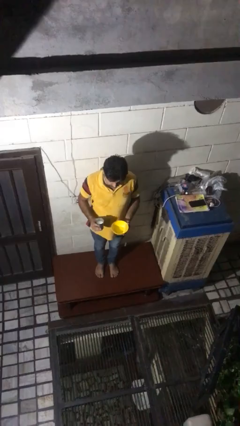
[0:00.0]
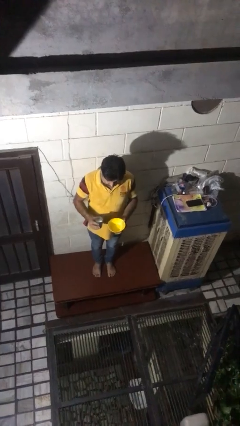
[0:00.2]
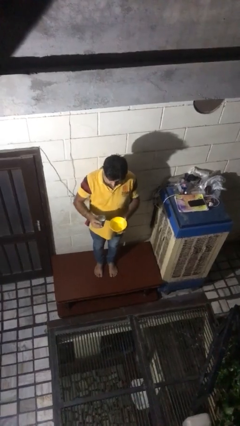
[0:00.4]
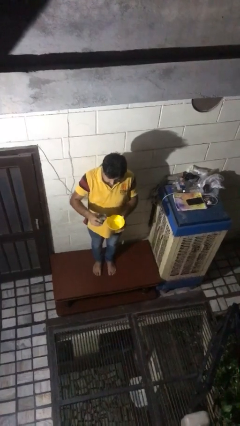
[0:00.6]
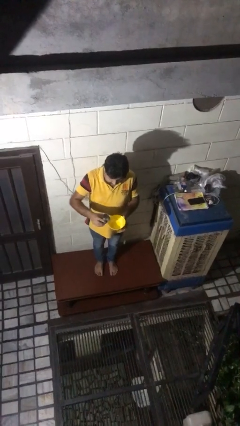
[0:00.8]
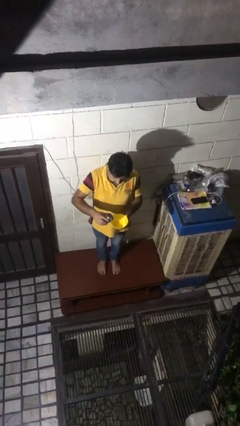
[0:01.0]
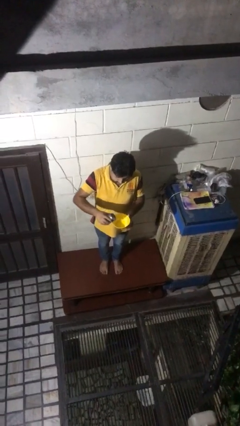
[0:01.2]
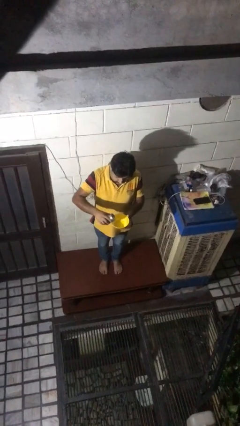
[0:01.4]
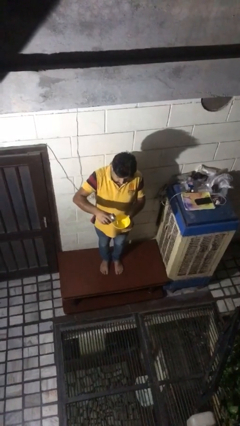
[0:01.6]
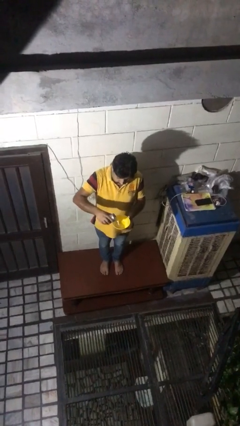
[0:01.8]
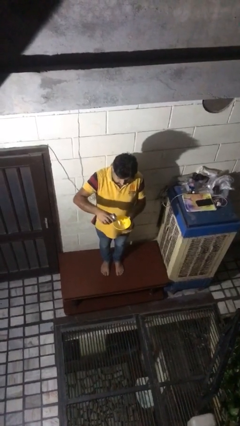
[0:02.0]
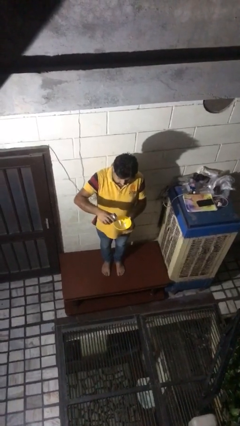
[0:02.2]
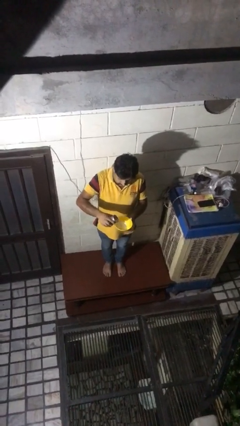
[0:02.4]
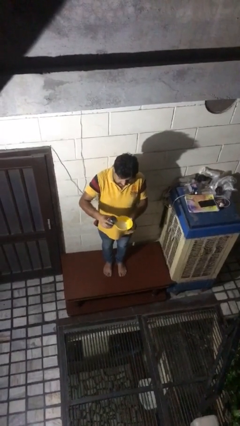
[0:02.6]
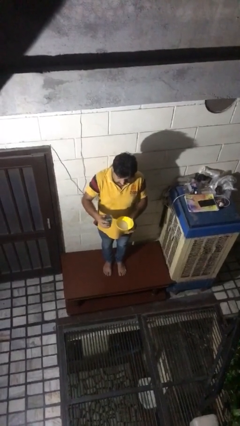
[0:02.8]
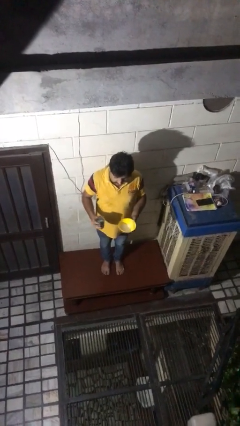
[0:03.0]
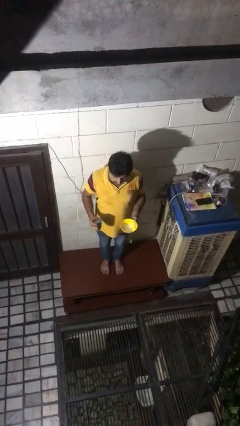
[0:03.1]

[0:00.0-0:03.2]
person pours into bowl

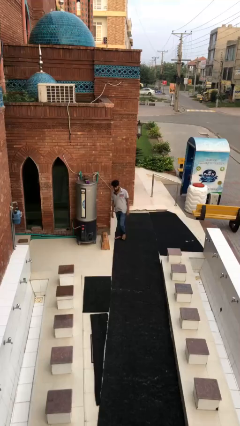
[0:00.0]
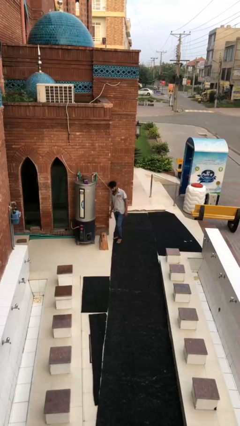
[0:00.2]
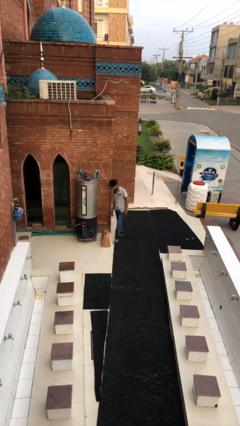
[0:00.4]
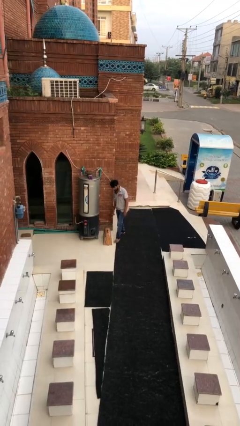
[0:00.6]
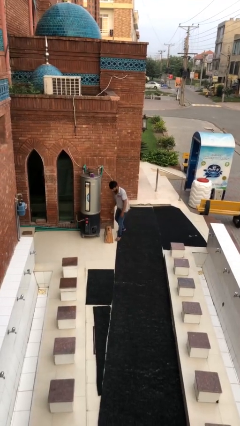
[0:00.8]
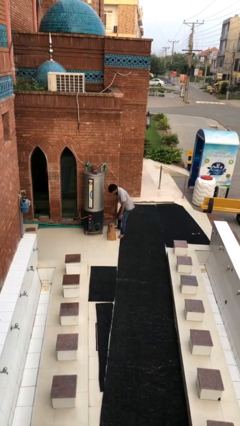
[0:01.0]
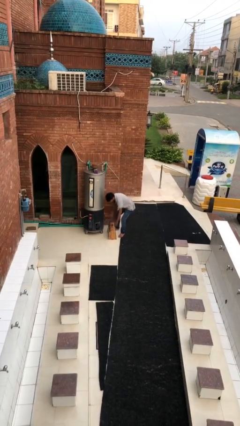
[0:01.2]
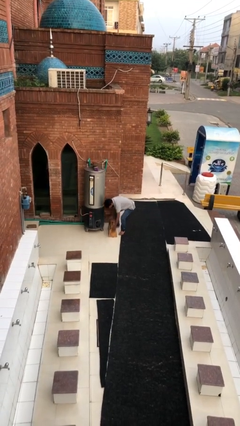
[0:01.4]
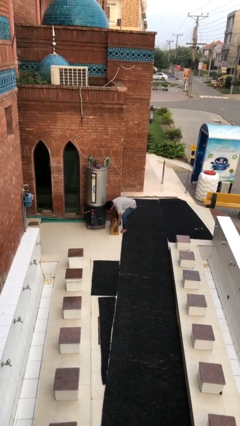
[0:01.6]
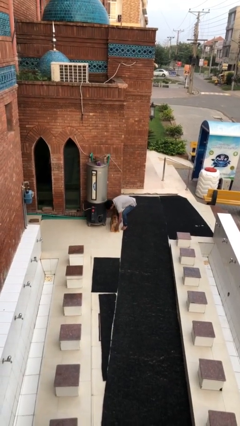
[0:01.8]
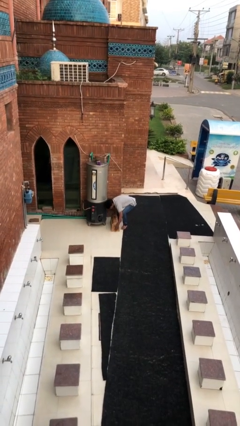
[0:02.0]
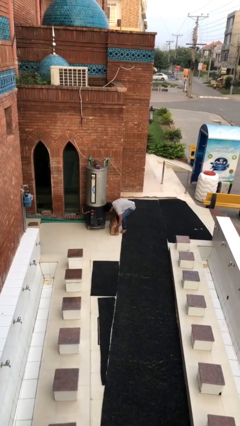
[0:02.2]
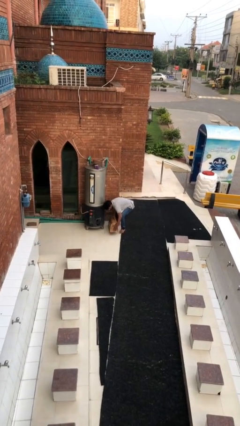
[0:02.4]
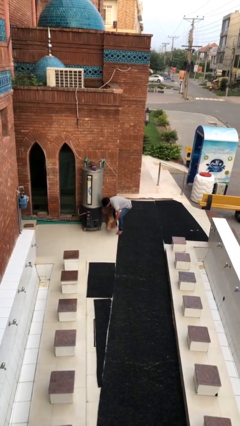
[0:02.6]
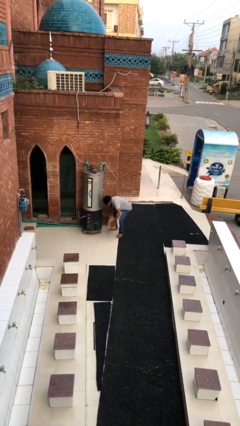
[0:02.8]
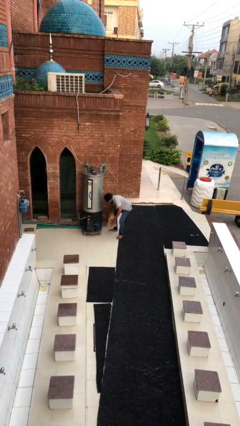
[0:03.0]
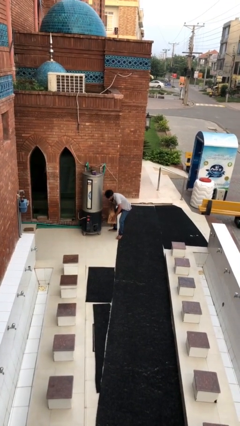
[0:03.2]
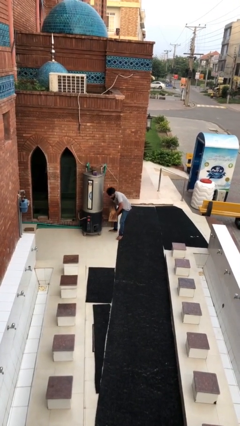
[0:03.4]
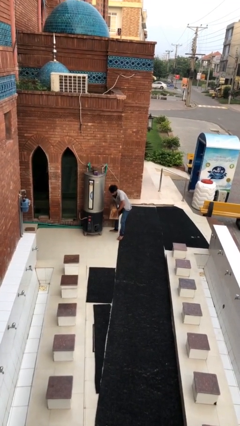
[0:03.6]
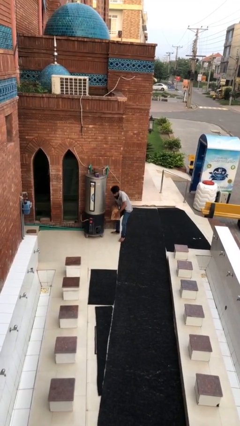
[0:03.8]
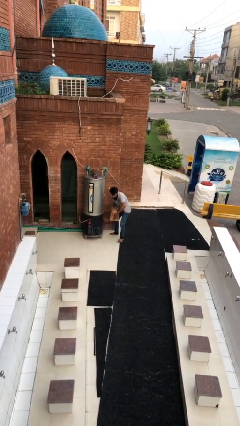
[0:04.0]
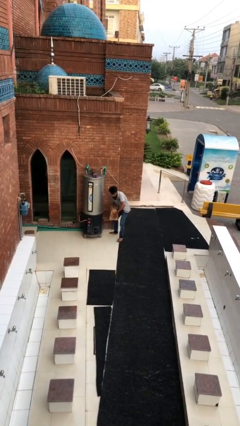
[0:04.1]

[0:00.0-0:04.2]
person picks up object from floor

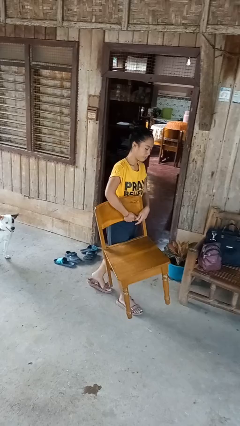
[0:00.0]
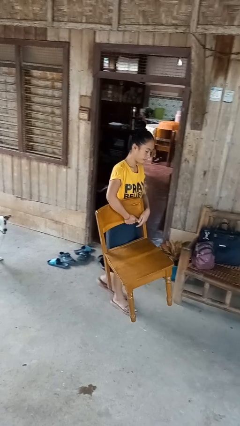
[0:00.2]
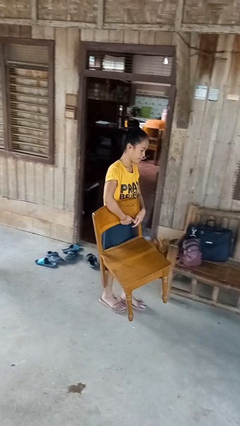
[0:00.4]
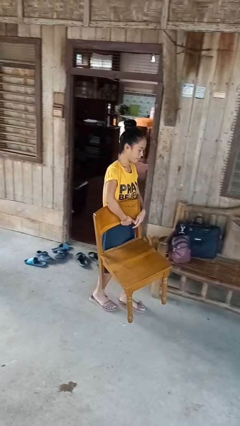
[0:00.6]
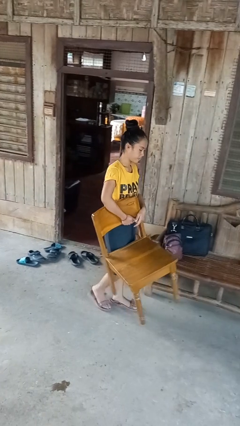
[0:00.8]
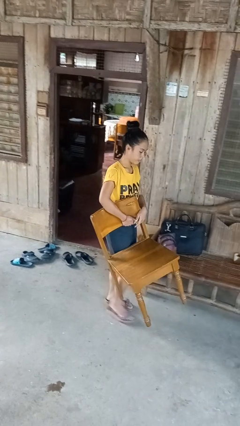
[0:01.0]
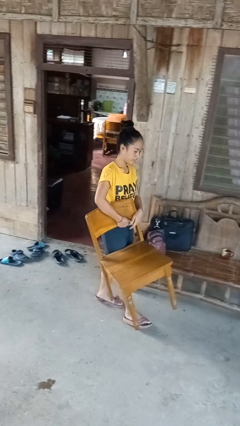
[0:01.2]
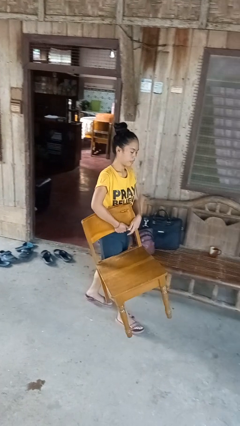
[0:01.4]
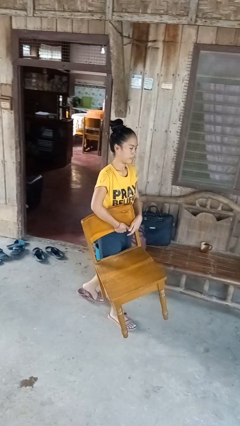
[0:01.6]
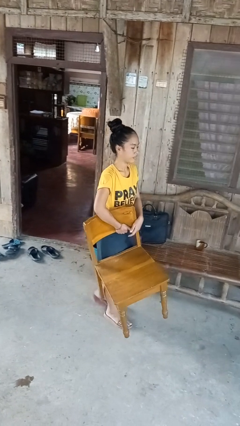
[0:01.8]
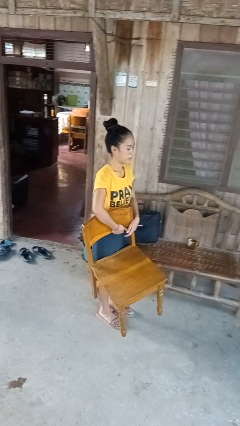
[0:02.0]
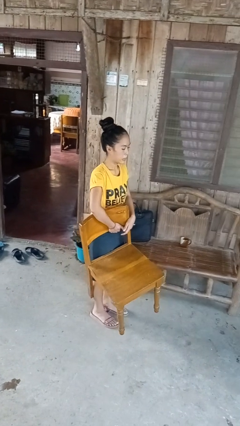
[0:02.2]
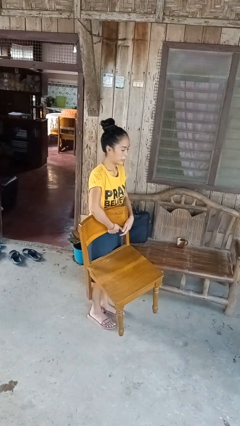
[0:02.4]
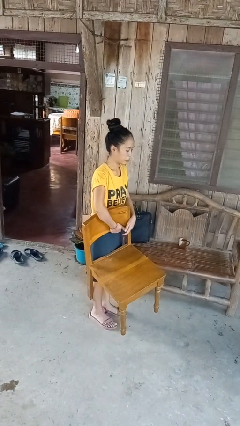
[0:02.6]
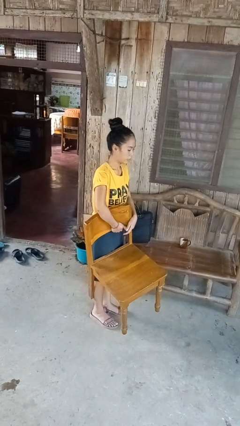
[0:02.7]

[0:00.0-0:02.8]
person carries furniture

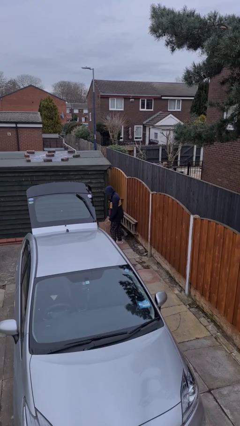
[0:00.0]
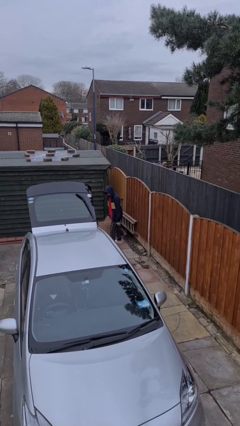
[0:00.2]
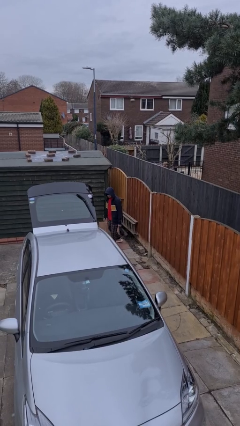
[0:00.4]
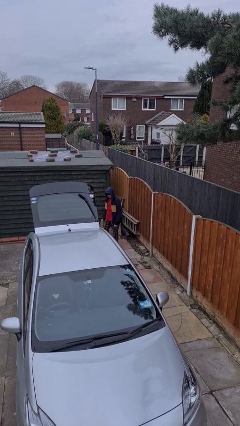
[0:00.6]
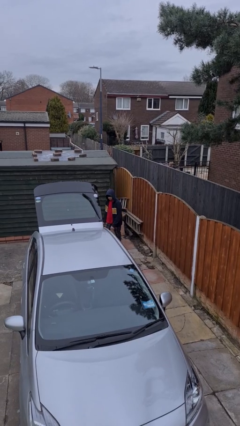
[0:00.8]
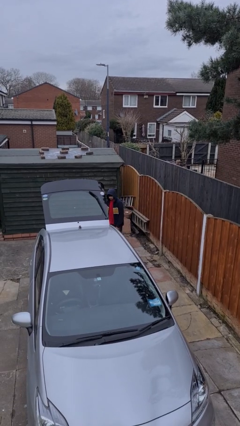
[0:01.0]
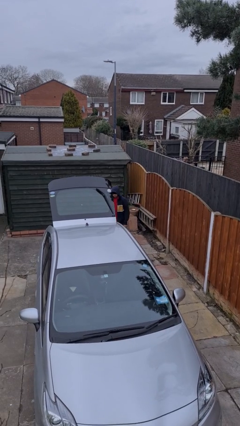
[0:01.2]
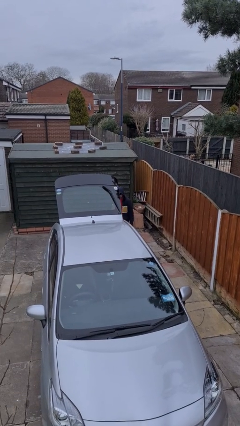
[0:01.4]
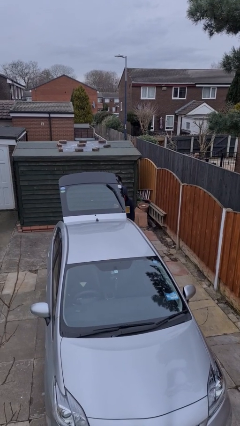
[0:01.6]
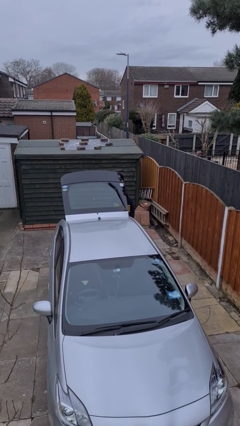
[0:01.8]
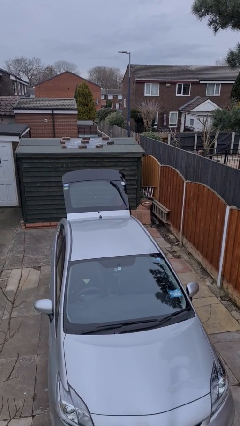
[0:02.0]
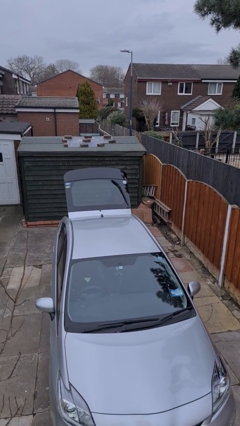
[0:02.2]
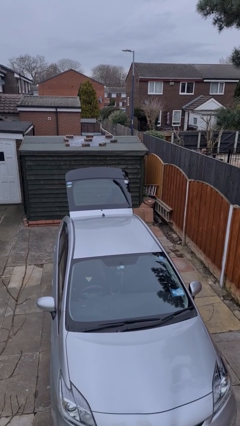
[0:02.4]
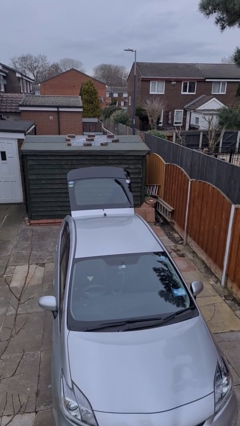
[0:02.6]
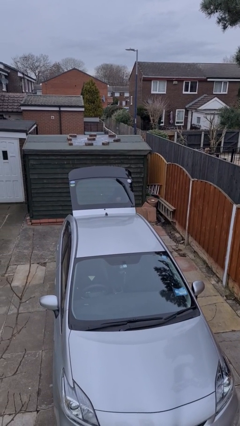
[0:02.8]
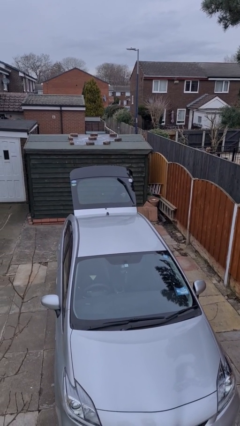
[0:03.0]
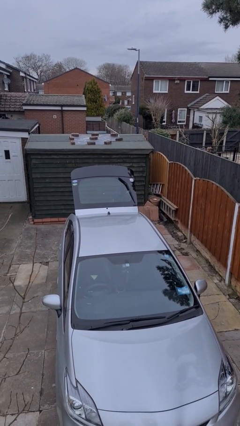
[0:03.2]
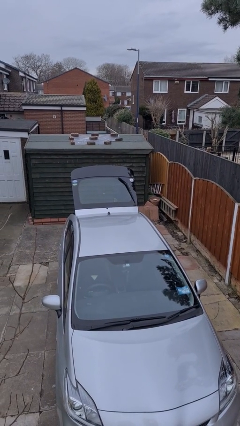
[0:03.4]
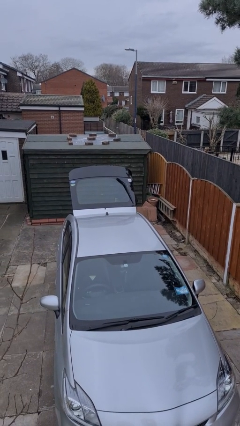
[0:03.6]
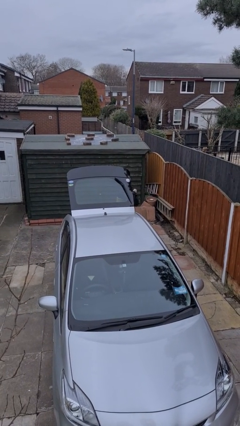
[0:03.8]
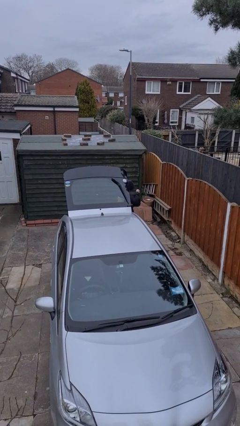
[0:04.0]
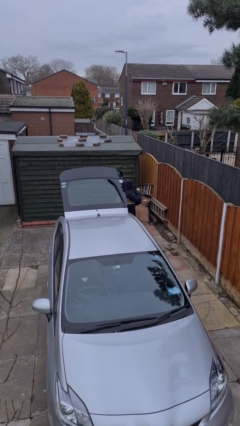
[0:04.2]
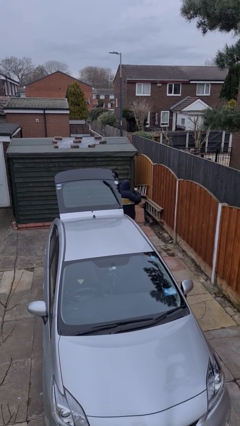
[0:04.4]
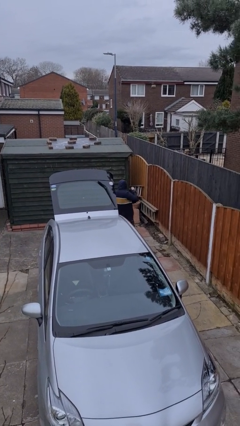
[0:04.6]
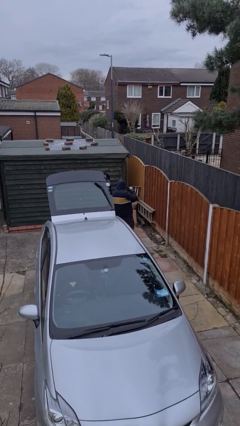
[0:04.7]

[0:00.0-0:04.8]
person unloads car

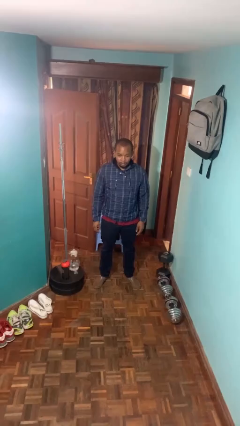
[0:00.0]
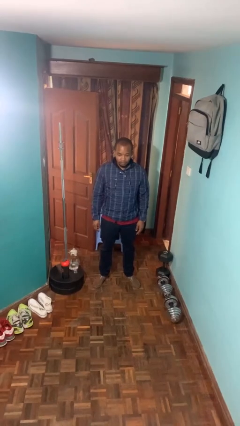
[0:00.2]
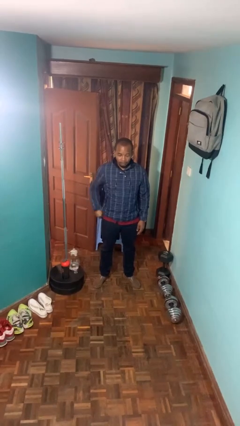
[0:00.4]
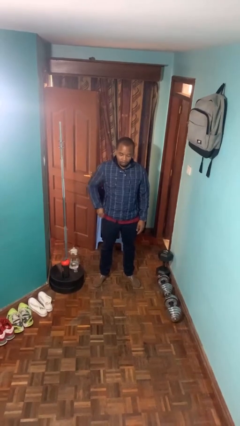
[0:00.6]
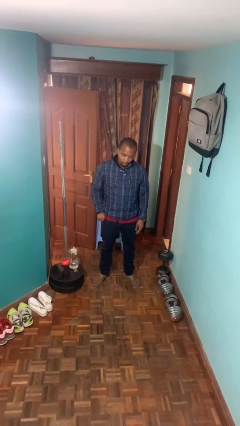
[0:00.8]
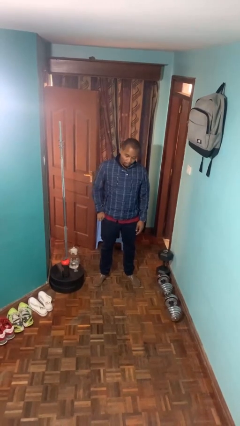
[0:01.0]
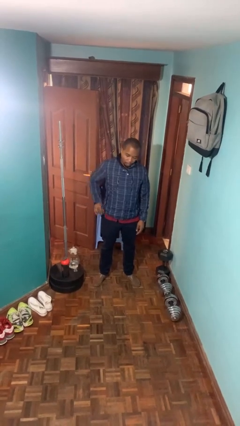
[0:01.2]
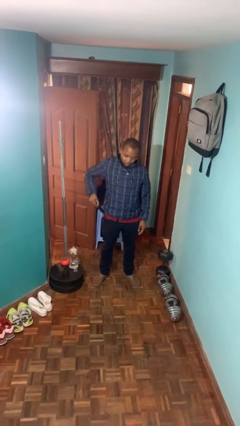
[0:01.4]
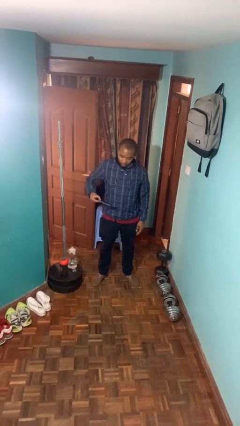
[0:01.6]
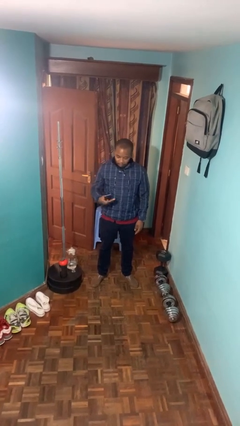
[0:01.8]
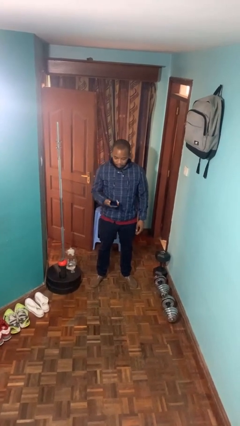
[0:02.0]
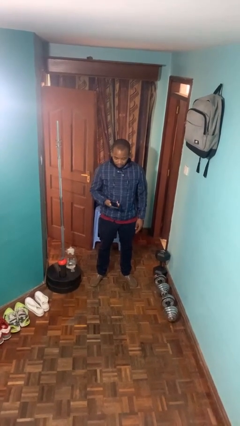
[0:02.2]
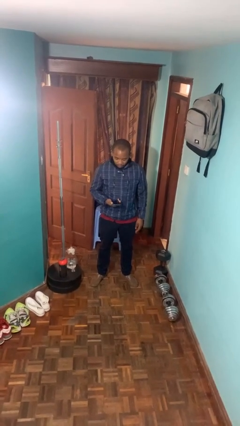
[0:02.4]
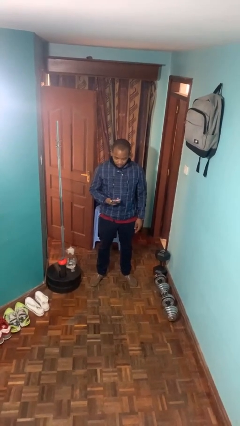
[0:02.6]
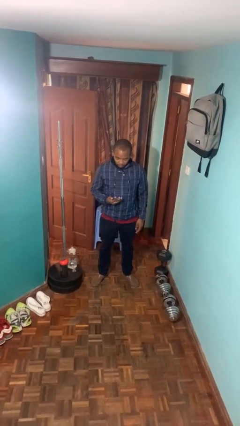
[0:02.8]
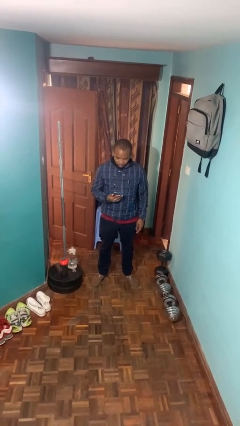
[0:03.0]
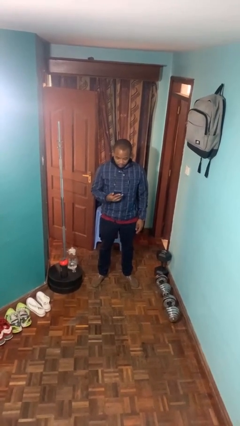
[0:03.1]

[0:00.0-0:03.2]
person takes phone from pocket
